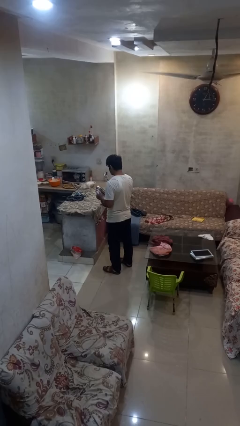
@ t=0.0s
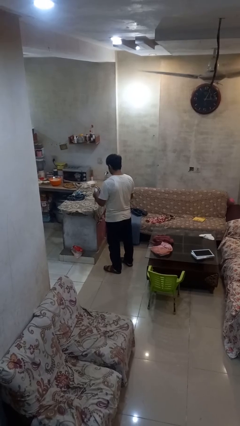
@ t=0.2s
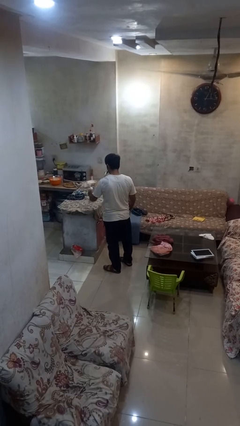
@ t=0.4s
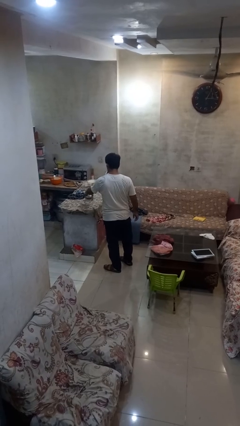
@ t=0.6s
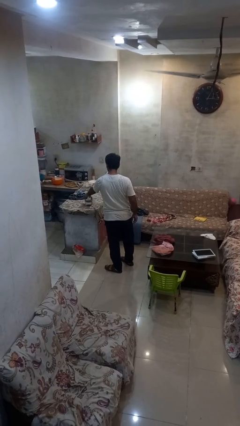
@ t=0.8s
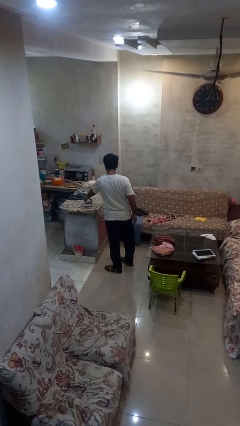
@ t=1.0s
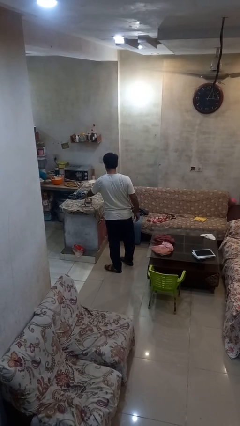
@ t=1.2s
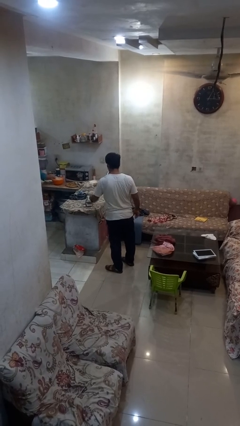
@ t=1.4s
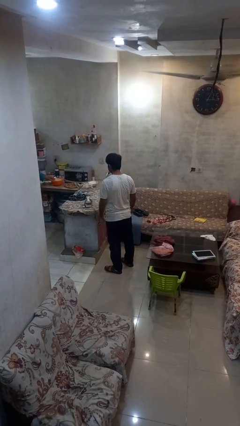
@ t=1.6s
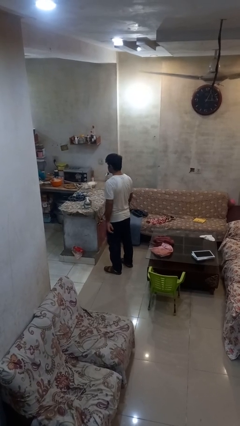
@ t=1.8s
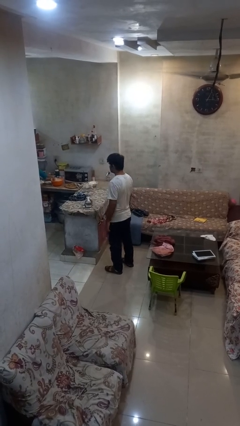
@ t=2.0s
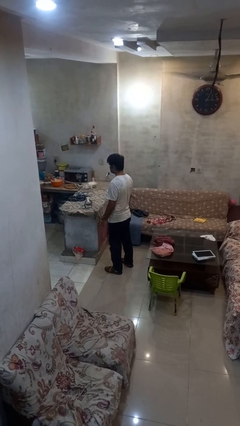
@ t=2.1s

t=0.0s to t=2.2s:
person puts down object on countertop

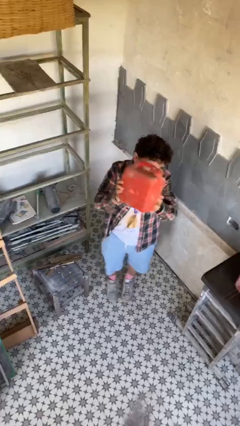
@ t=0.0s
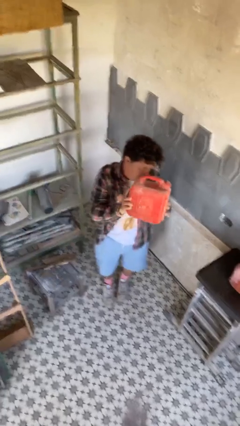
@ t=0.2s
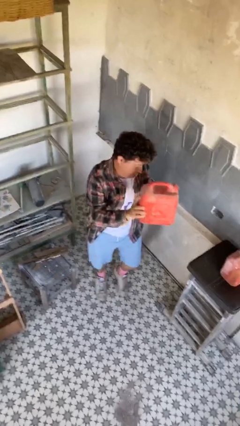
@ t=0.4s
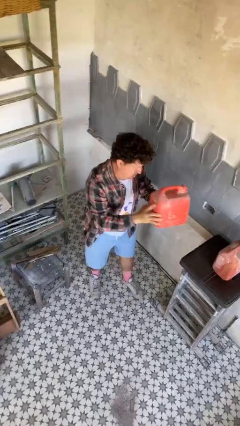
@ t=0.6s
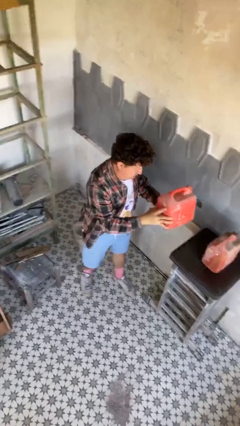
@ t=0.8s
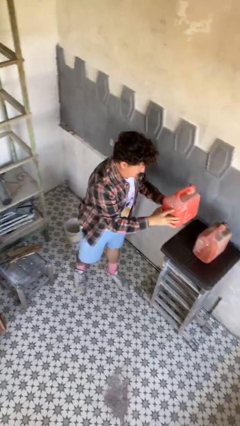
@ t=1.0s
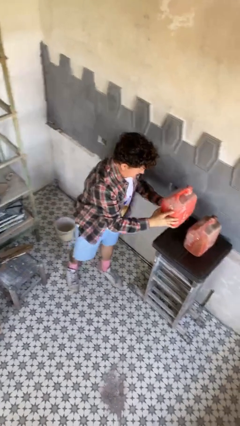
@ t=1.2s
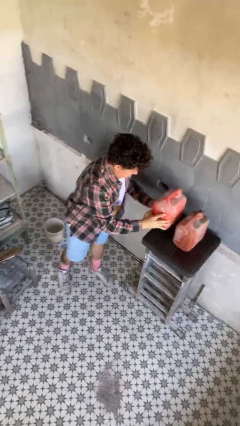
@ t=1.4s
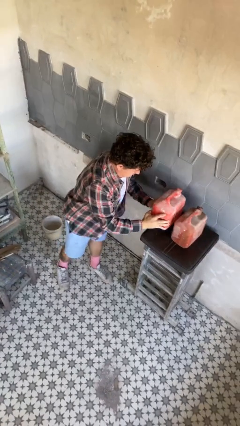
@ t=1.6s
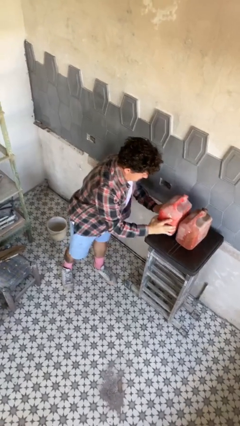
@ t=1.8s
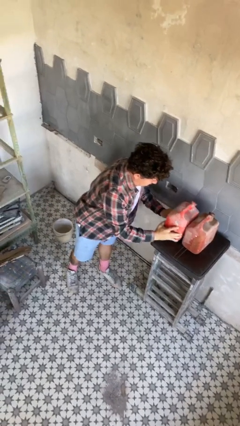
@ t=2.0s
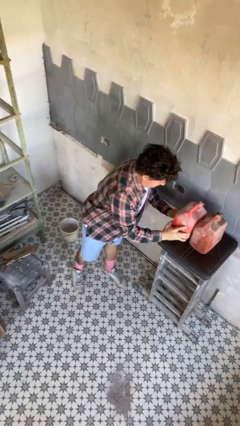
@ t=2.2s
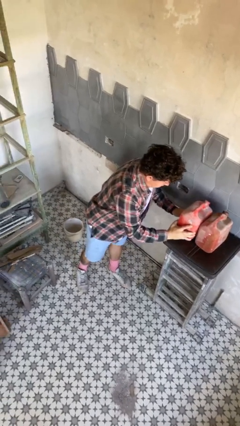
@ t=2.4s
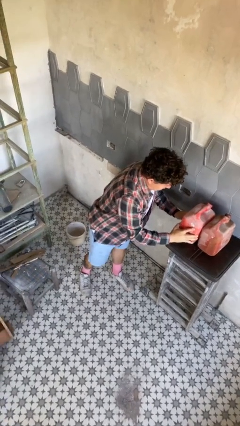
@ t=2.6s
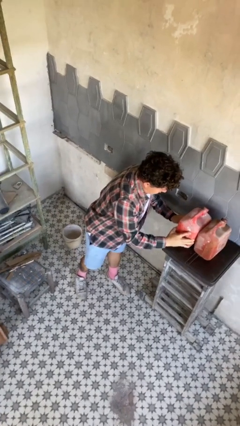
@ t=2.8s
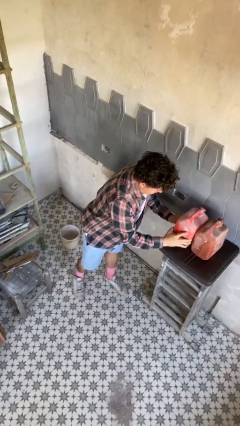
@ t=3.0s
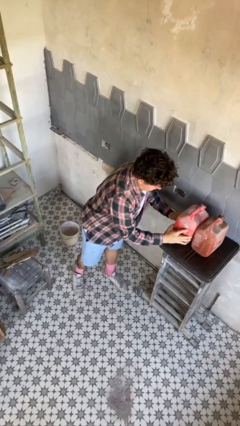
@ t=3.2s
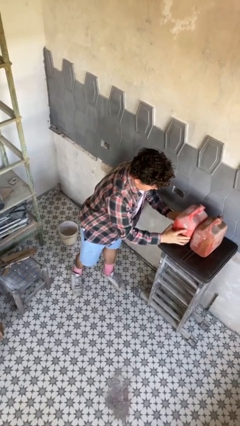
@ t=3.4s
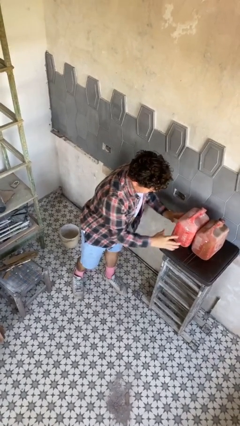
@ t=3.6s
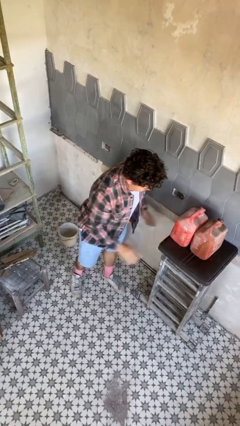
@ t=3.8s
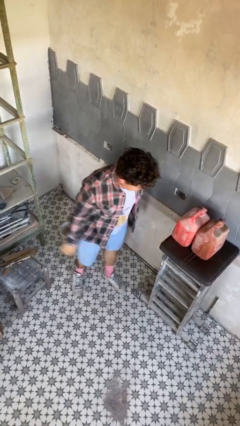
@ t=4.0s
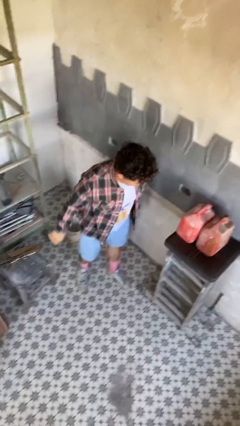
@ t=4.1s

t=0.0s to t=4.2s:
person puts down object on table

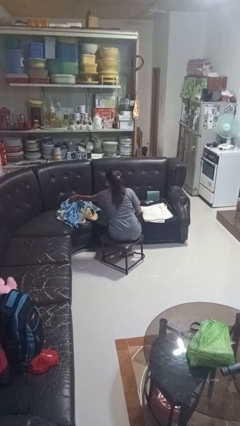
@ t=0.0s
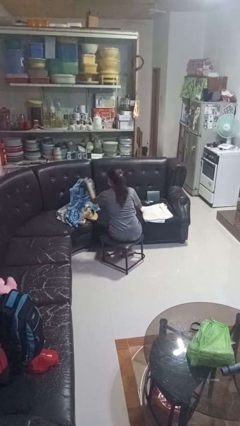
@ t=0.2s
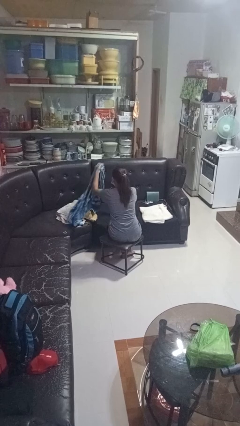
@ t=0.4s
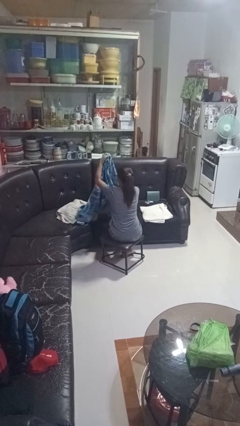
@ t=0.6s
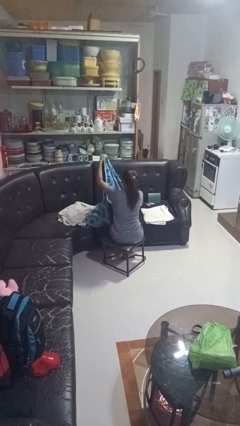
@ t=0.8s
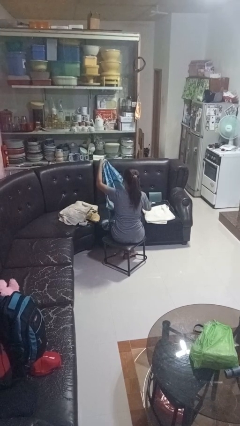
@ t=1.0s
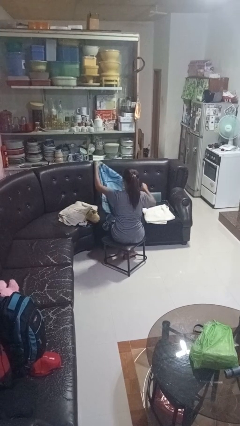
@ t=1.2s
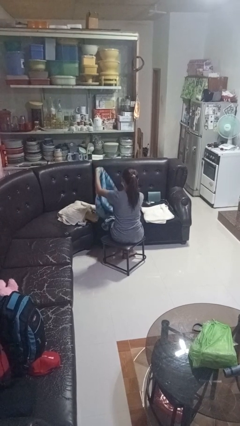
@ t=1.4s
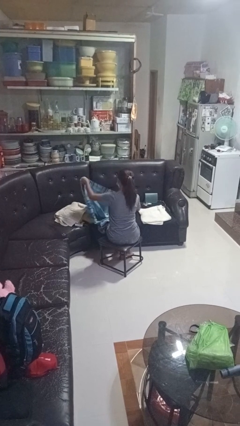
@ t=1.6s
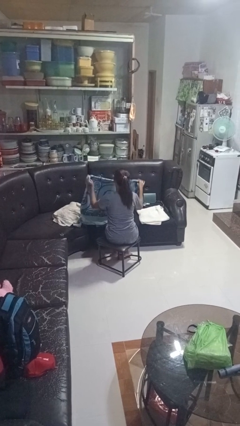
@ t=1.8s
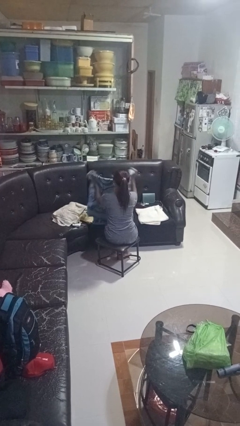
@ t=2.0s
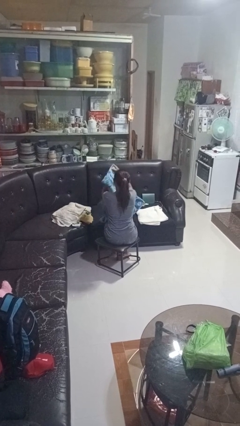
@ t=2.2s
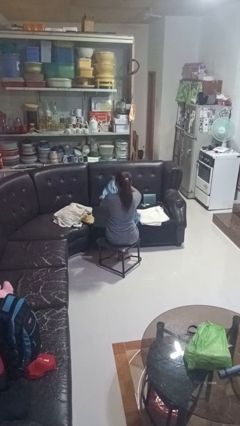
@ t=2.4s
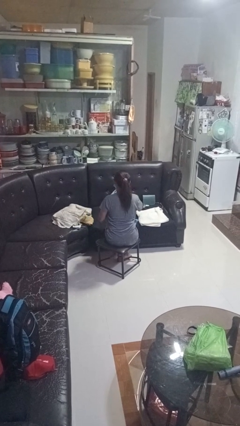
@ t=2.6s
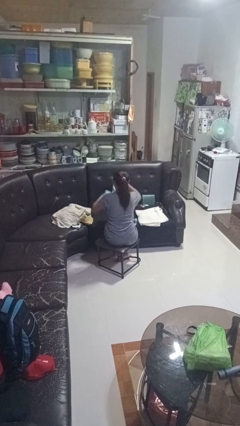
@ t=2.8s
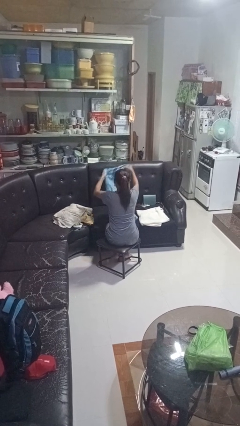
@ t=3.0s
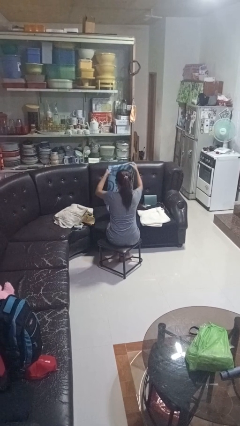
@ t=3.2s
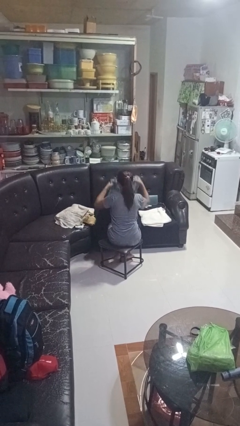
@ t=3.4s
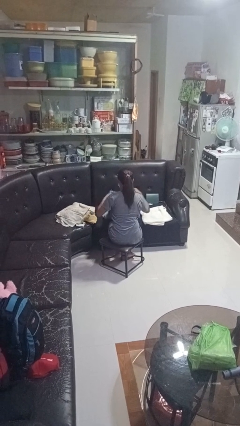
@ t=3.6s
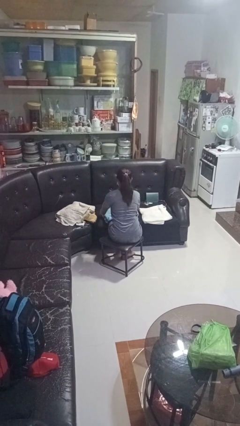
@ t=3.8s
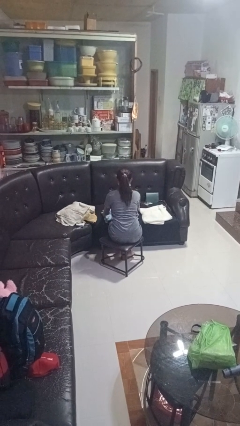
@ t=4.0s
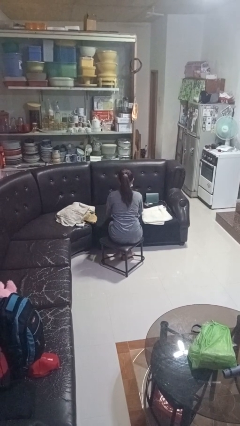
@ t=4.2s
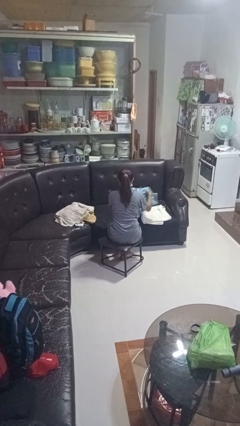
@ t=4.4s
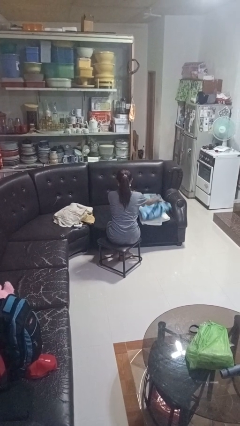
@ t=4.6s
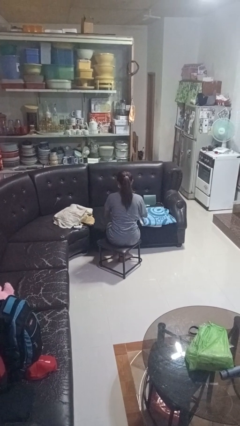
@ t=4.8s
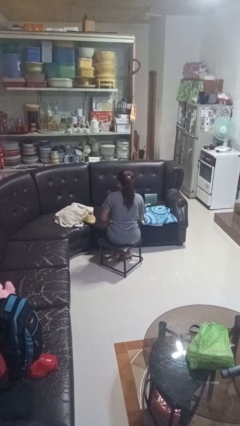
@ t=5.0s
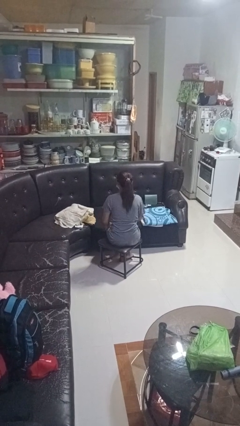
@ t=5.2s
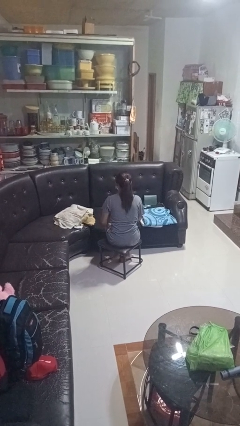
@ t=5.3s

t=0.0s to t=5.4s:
person folds towel

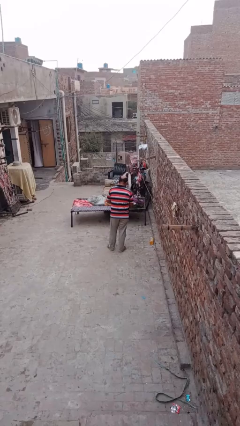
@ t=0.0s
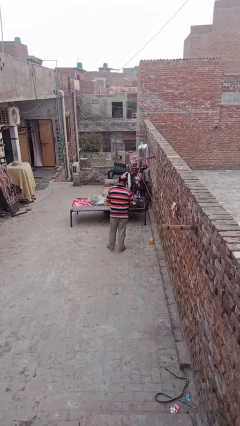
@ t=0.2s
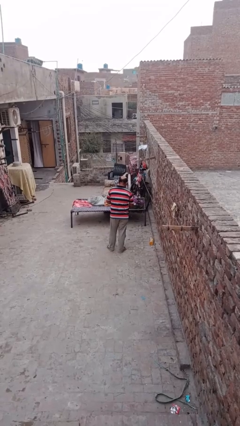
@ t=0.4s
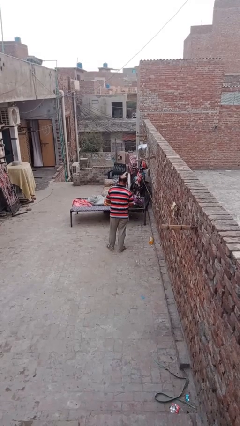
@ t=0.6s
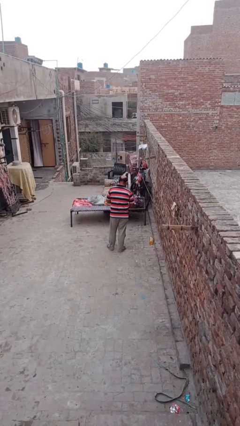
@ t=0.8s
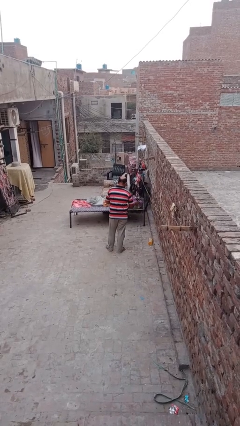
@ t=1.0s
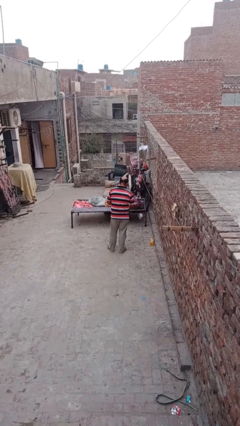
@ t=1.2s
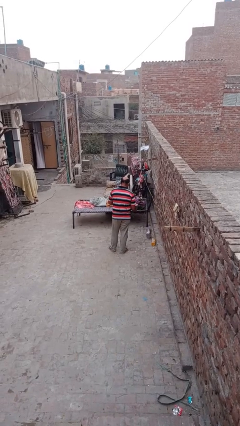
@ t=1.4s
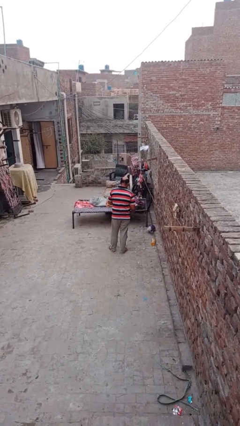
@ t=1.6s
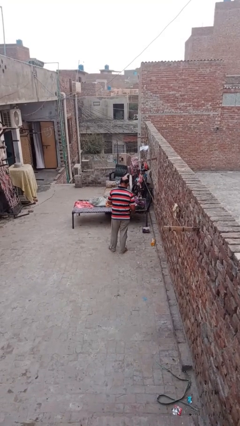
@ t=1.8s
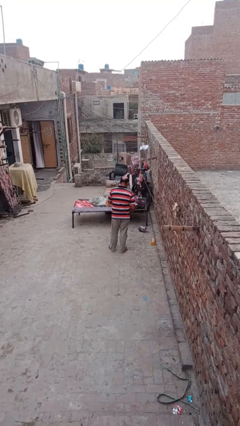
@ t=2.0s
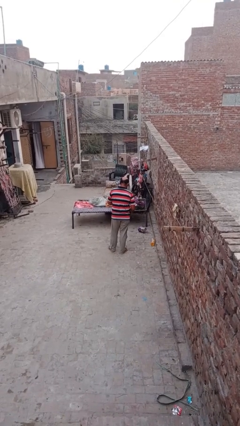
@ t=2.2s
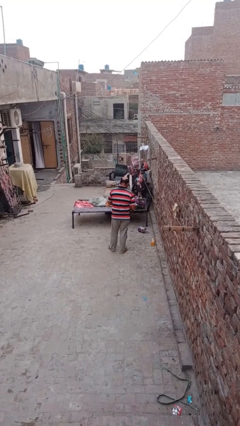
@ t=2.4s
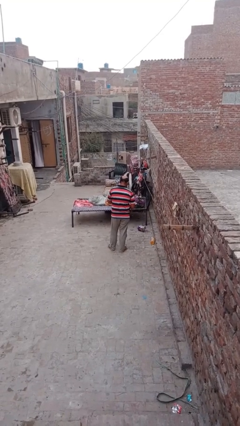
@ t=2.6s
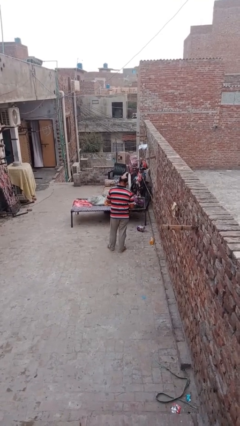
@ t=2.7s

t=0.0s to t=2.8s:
person discards trash

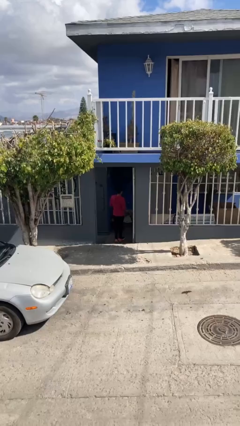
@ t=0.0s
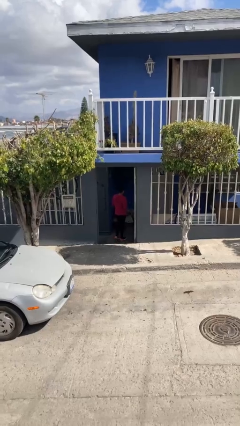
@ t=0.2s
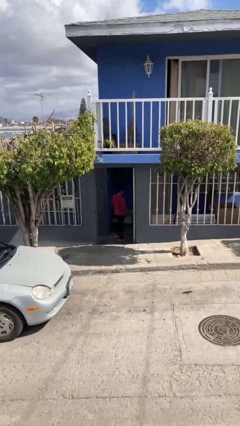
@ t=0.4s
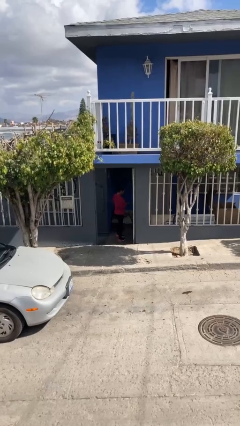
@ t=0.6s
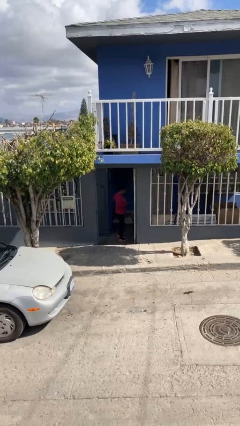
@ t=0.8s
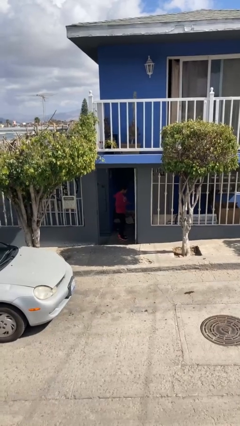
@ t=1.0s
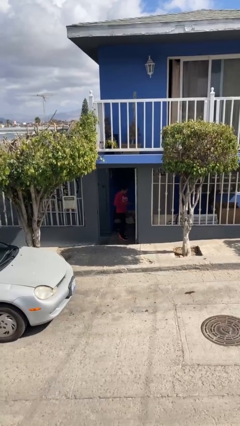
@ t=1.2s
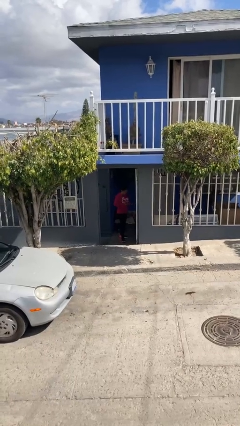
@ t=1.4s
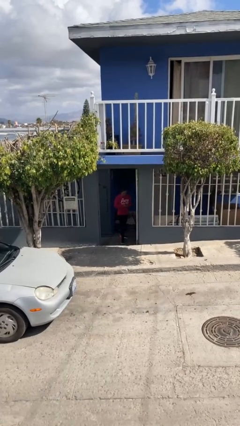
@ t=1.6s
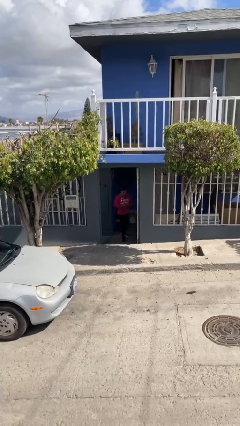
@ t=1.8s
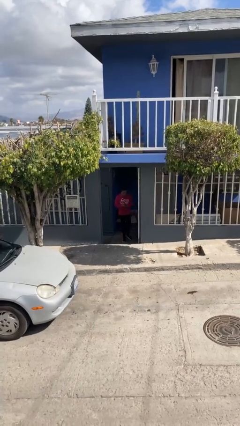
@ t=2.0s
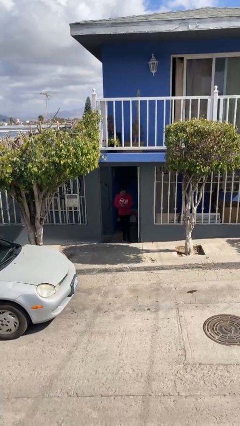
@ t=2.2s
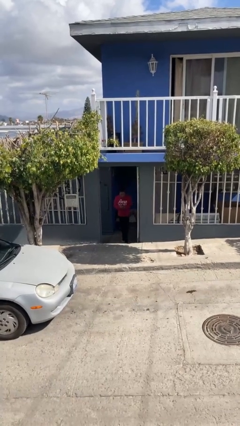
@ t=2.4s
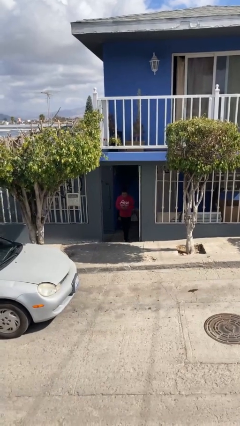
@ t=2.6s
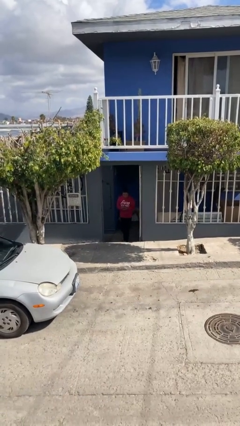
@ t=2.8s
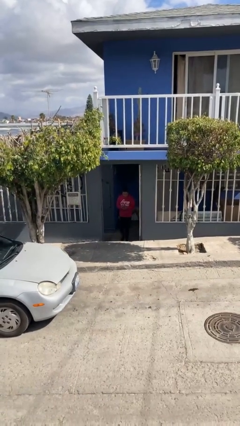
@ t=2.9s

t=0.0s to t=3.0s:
person exits scene through structure

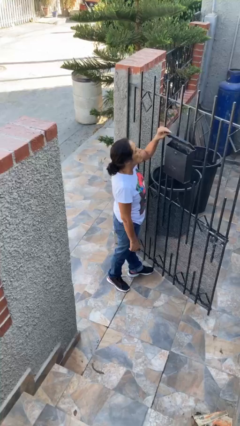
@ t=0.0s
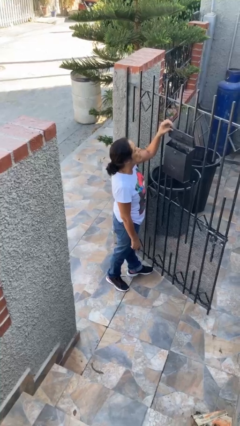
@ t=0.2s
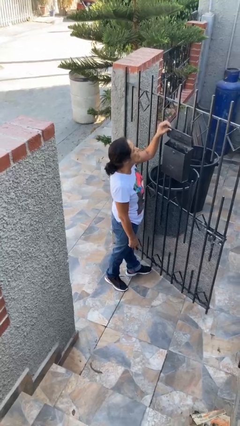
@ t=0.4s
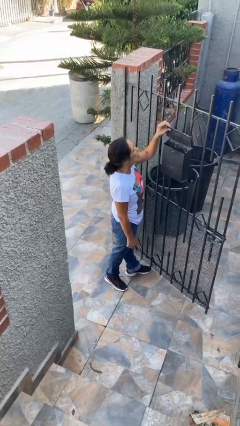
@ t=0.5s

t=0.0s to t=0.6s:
person opens mailbox
